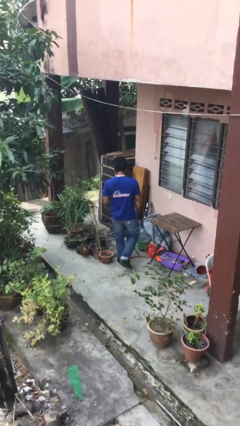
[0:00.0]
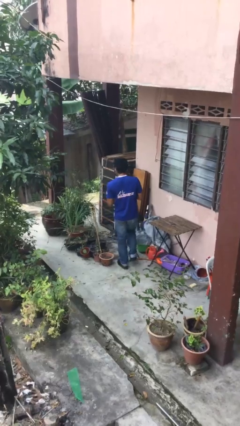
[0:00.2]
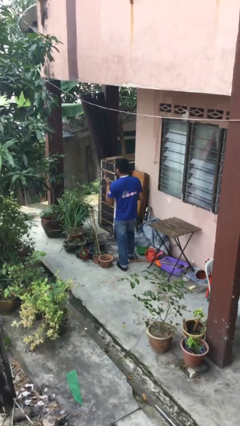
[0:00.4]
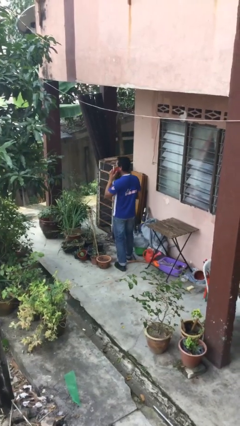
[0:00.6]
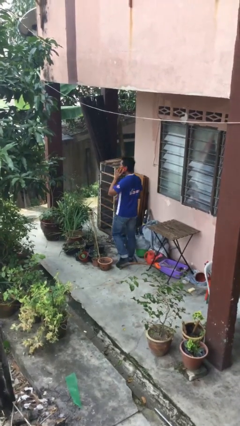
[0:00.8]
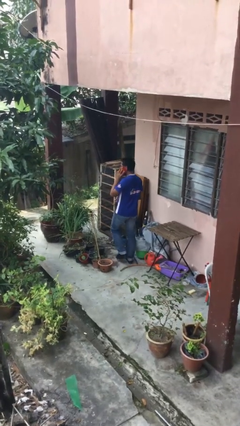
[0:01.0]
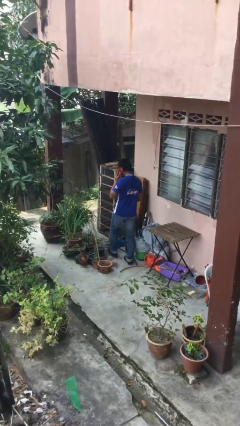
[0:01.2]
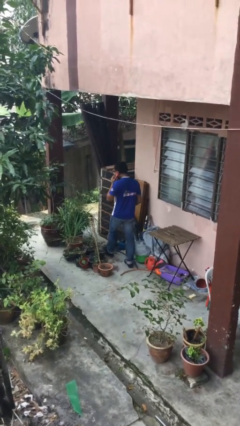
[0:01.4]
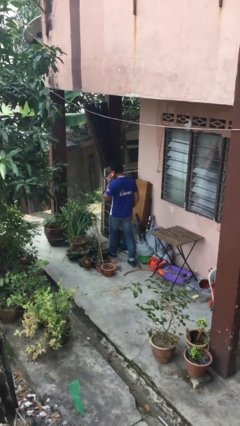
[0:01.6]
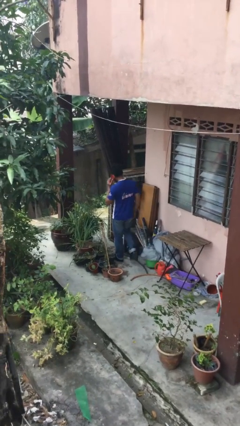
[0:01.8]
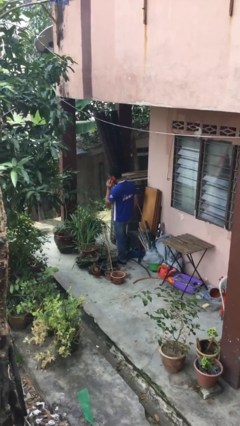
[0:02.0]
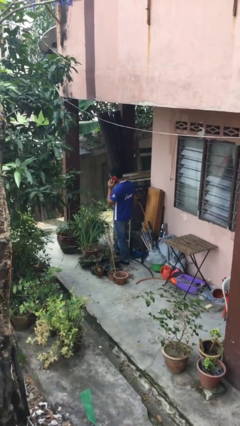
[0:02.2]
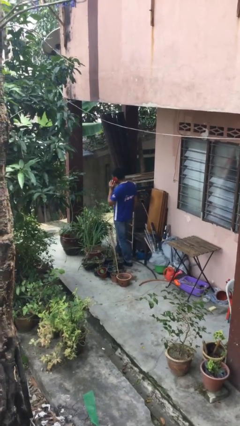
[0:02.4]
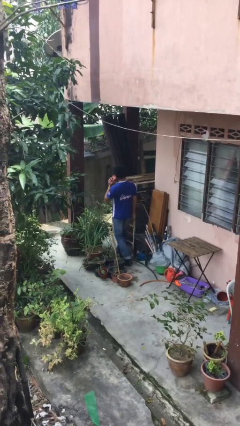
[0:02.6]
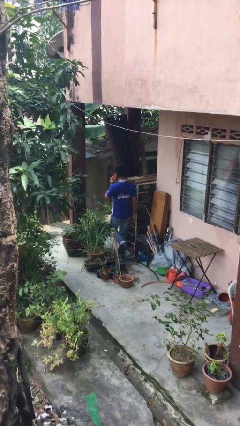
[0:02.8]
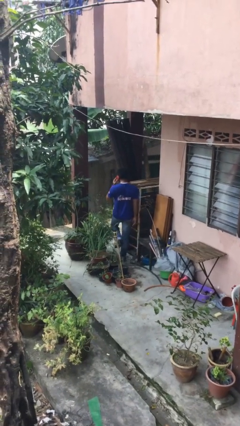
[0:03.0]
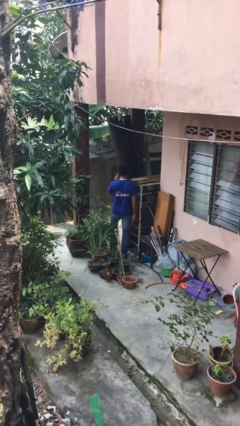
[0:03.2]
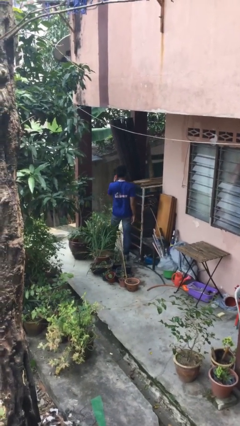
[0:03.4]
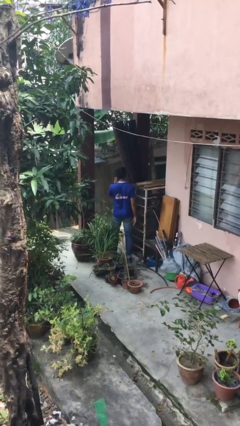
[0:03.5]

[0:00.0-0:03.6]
person talks on phone

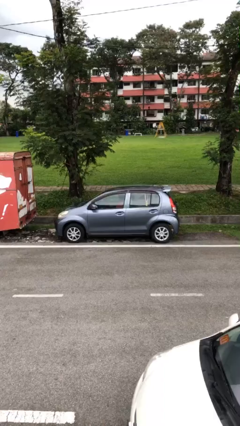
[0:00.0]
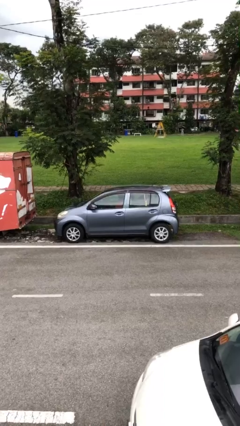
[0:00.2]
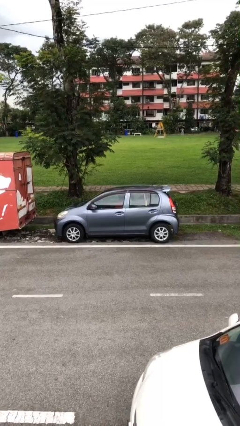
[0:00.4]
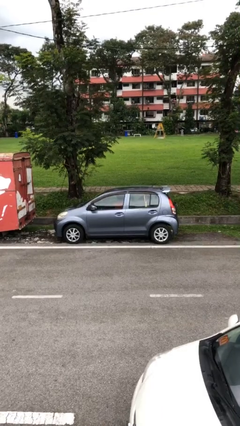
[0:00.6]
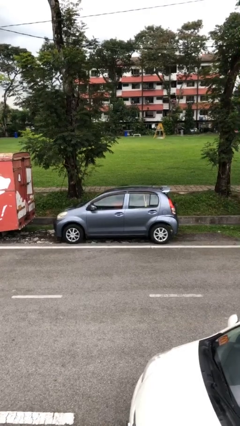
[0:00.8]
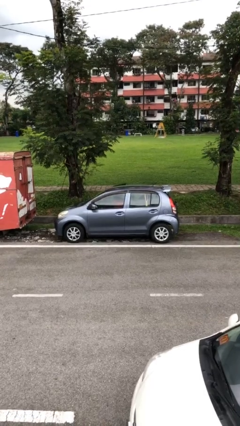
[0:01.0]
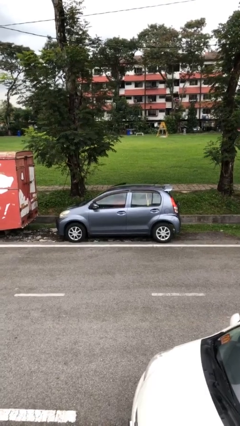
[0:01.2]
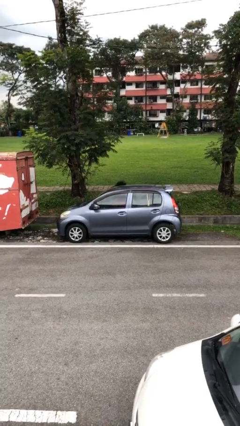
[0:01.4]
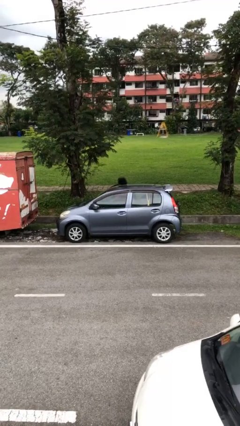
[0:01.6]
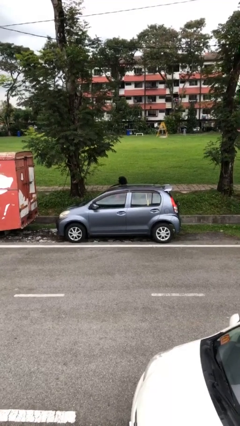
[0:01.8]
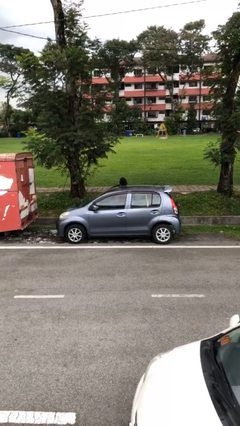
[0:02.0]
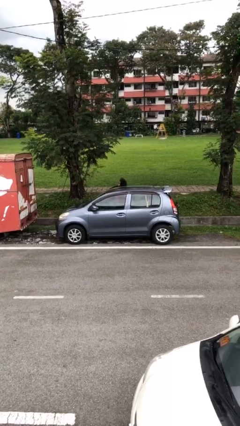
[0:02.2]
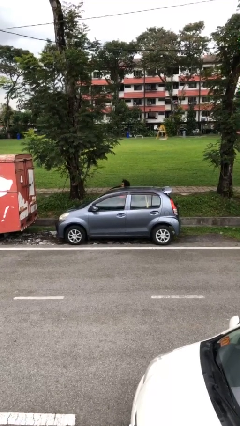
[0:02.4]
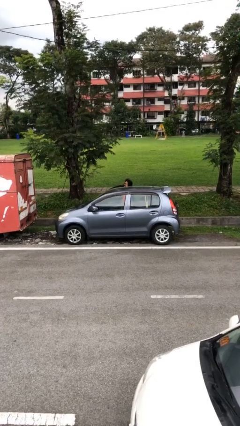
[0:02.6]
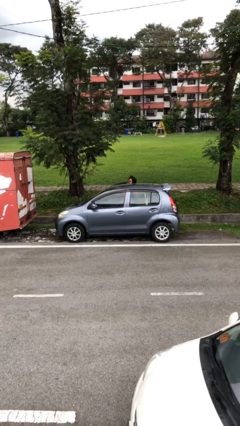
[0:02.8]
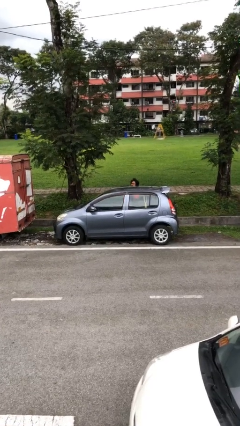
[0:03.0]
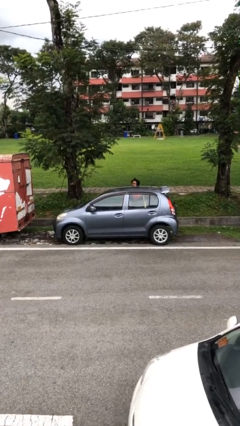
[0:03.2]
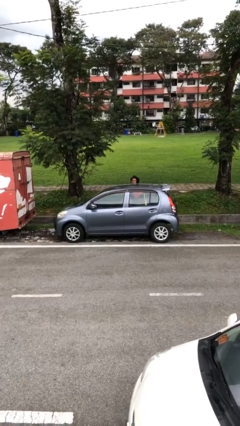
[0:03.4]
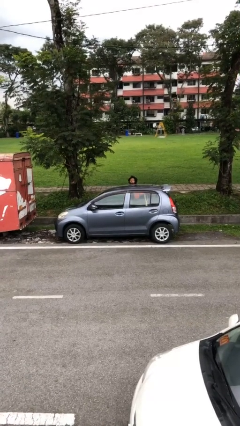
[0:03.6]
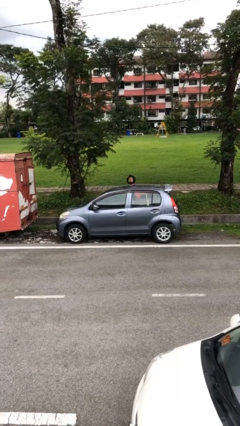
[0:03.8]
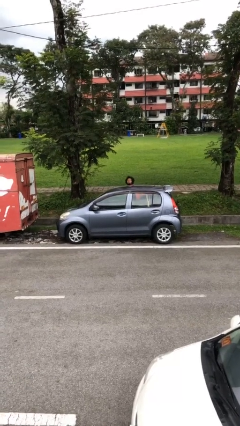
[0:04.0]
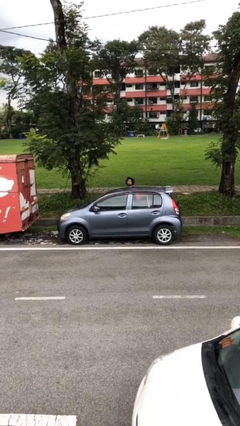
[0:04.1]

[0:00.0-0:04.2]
car drops off person

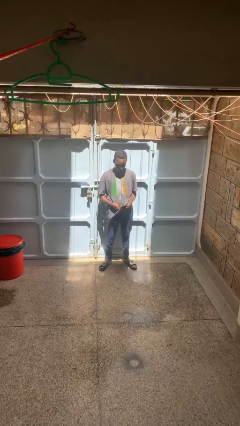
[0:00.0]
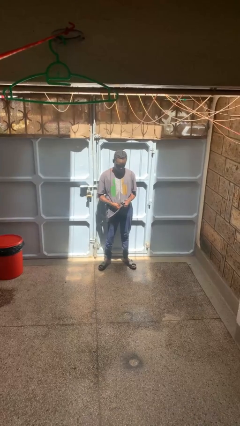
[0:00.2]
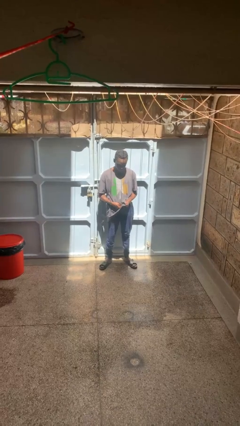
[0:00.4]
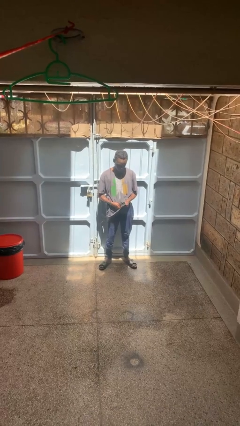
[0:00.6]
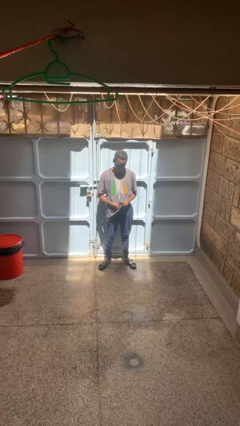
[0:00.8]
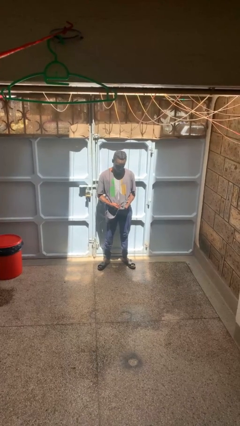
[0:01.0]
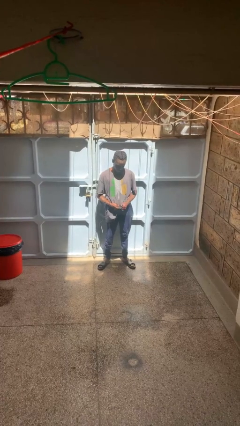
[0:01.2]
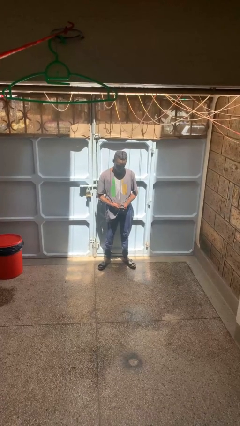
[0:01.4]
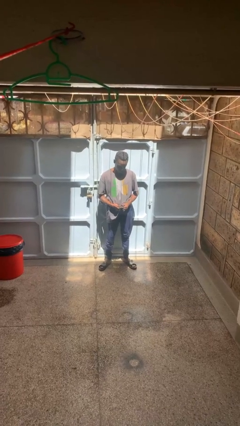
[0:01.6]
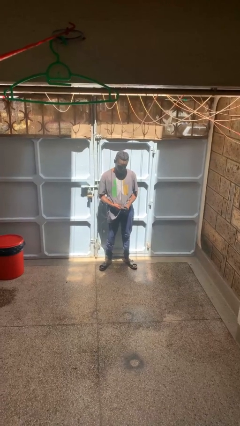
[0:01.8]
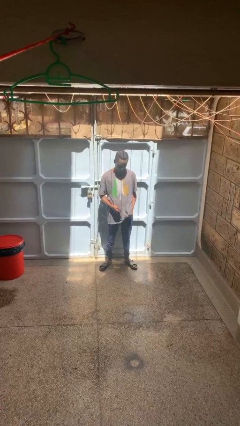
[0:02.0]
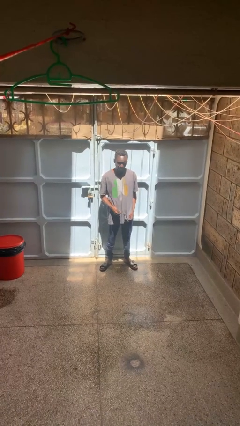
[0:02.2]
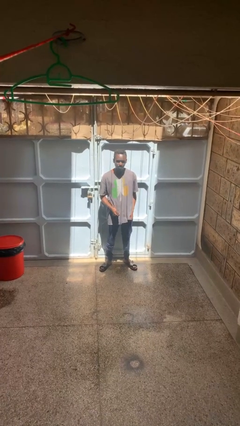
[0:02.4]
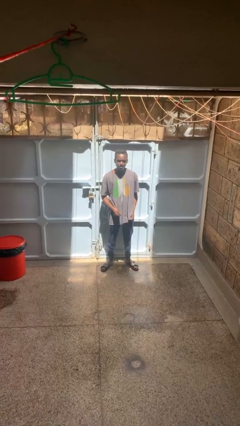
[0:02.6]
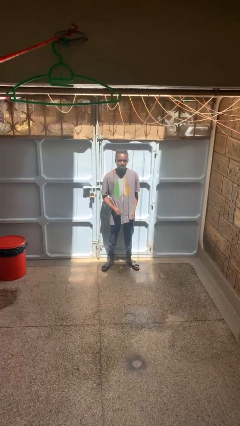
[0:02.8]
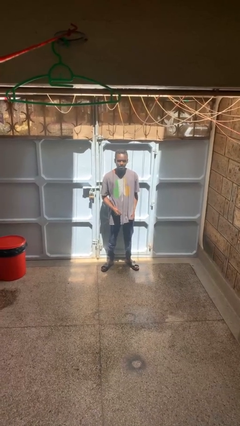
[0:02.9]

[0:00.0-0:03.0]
person cleans eyeglasses

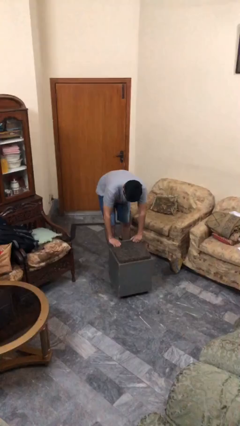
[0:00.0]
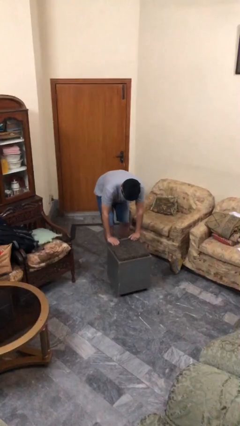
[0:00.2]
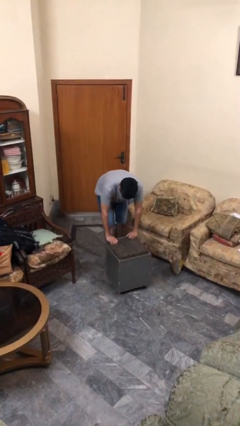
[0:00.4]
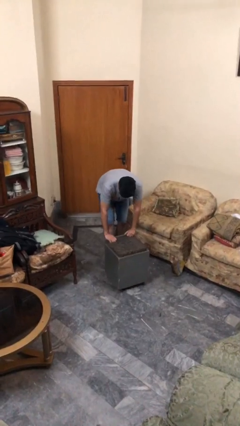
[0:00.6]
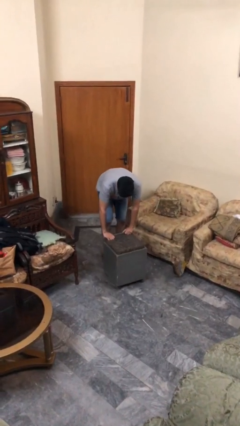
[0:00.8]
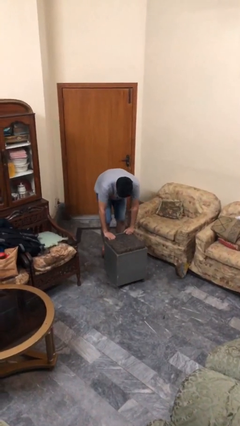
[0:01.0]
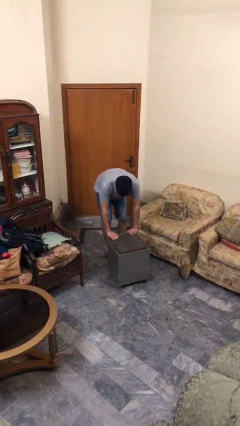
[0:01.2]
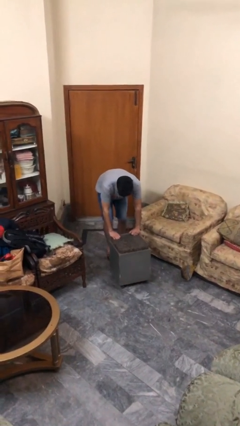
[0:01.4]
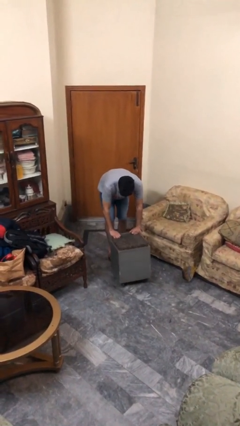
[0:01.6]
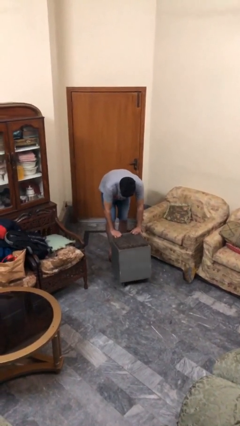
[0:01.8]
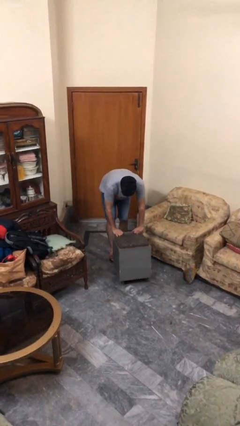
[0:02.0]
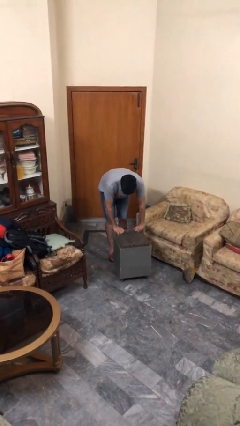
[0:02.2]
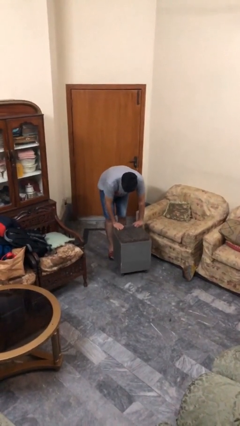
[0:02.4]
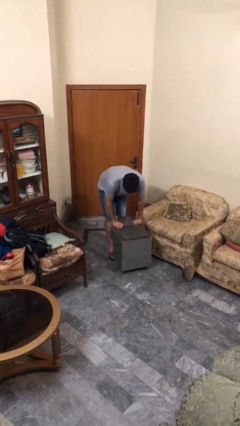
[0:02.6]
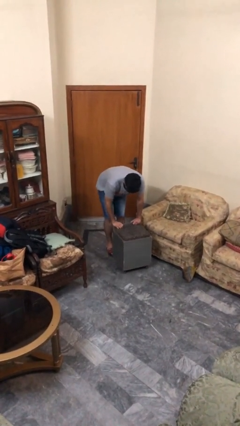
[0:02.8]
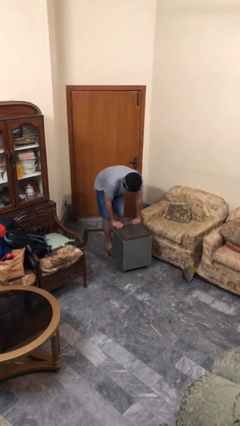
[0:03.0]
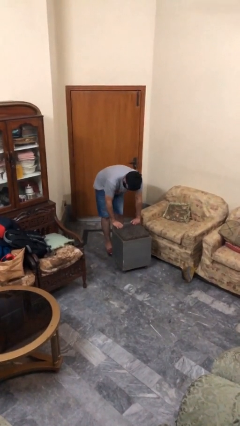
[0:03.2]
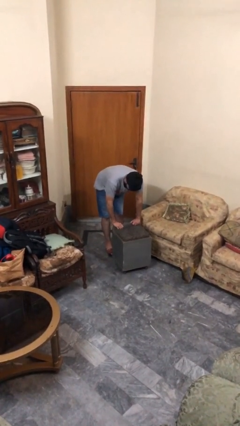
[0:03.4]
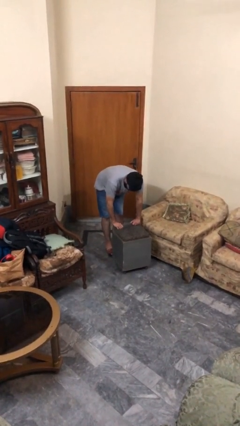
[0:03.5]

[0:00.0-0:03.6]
person pulls wheeled cart

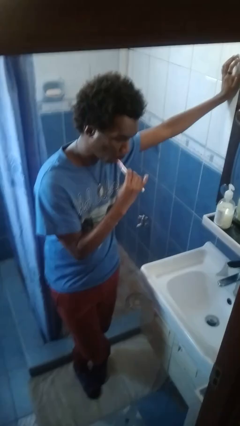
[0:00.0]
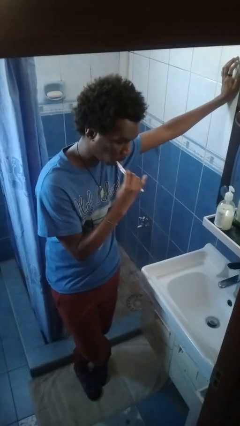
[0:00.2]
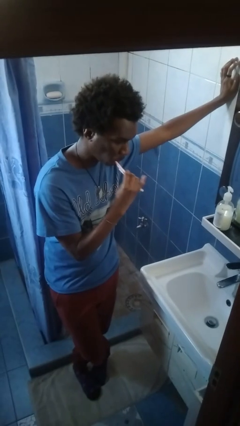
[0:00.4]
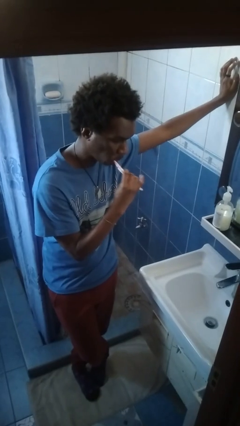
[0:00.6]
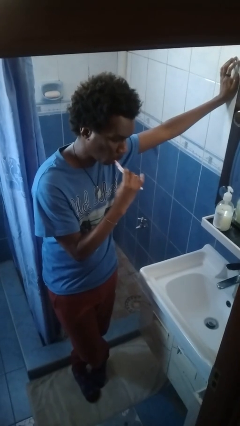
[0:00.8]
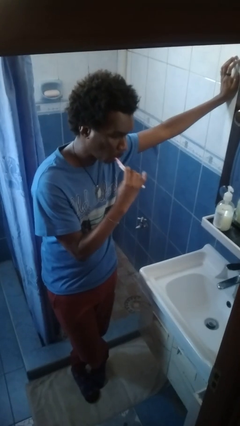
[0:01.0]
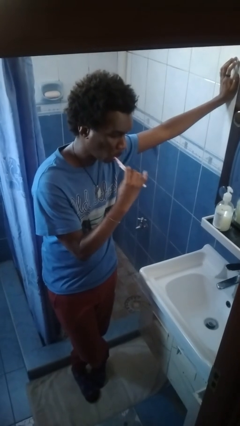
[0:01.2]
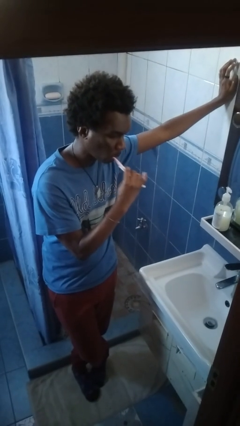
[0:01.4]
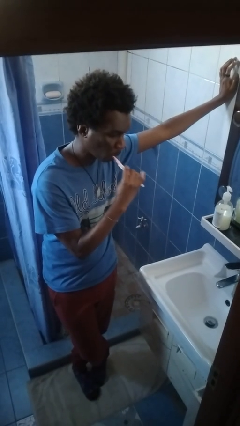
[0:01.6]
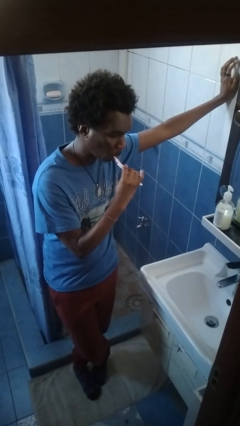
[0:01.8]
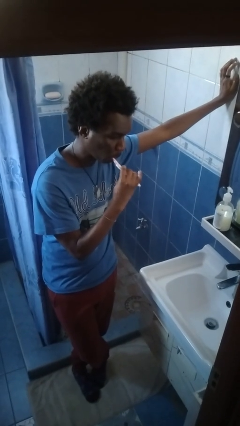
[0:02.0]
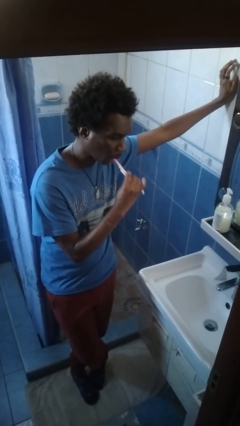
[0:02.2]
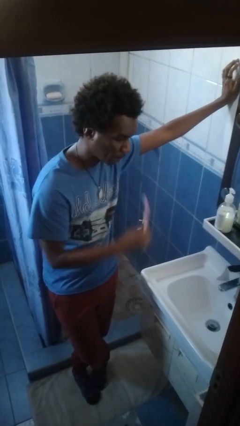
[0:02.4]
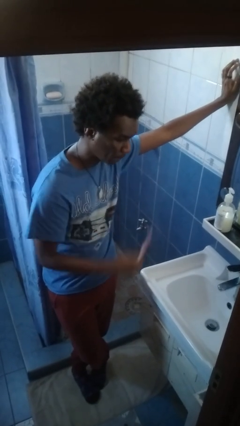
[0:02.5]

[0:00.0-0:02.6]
person brushes teeth

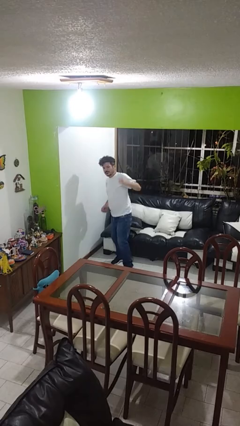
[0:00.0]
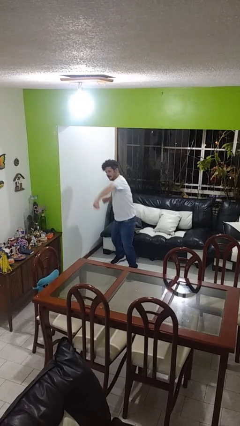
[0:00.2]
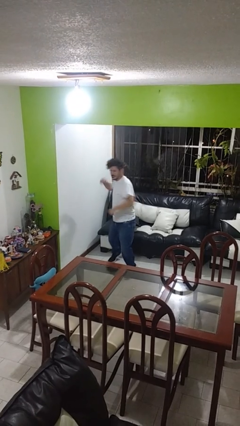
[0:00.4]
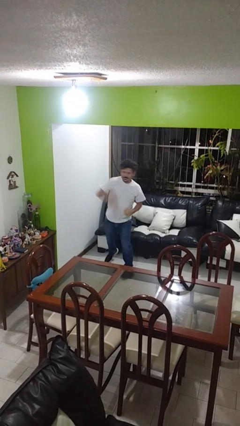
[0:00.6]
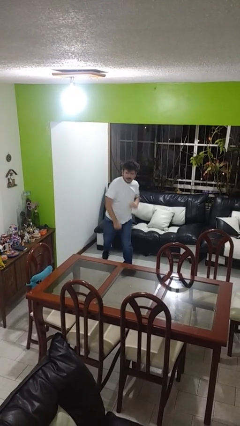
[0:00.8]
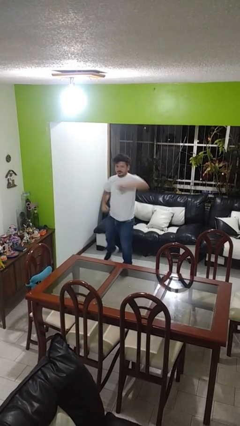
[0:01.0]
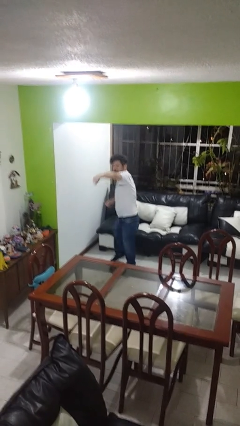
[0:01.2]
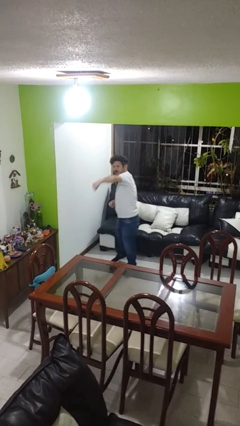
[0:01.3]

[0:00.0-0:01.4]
person punches
